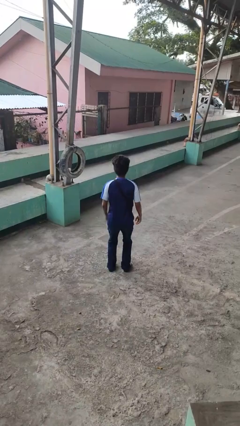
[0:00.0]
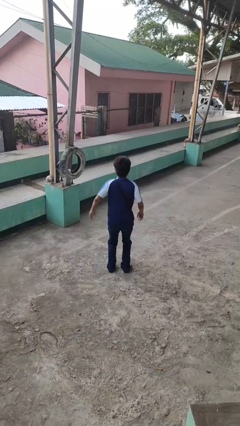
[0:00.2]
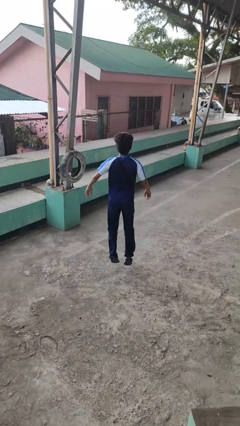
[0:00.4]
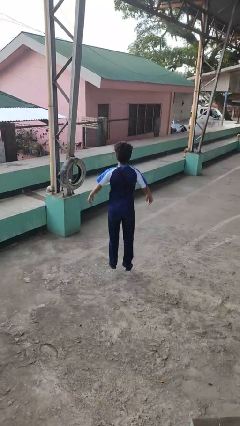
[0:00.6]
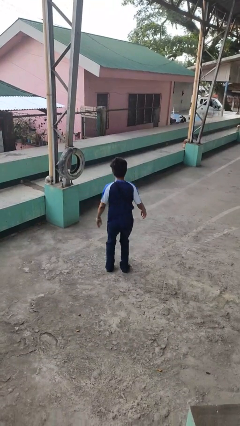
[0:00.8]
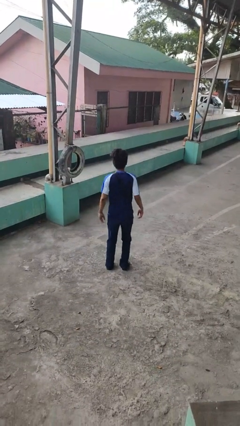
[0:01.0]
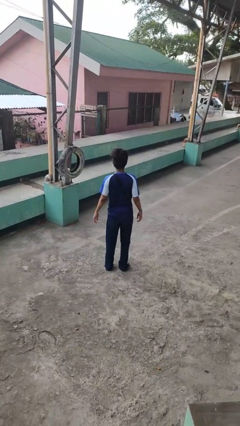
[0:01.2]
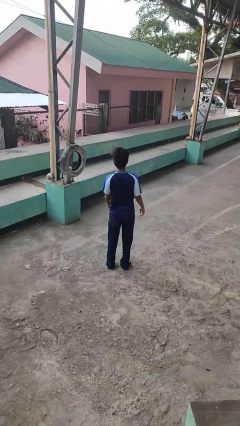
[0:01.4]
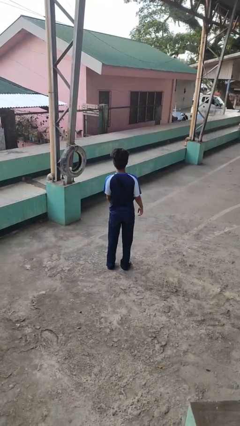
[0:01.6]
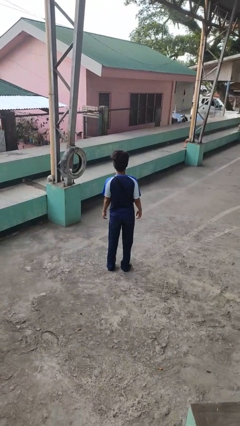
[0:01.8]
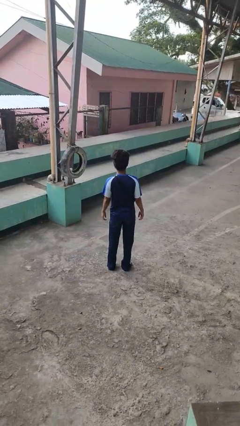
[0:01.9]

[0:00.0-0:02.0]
person jumps

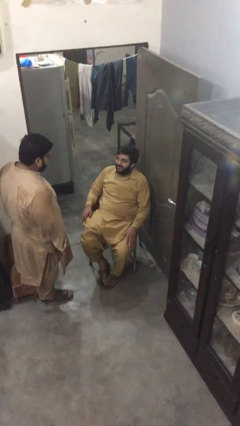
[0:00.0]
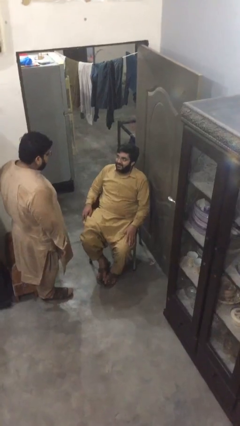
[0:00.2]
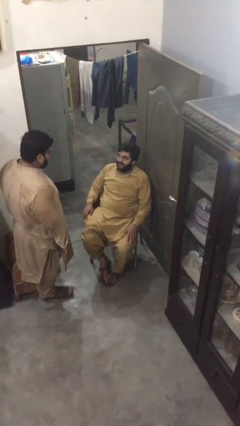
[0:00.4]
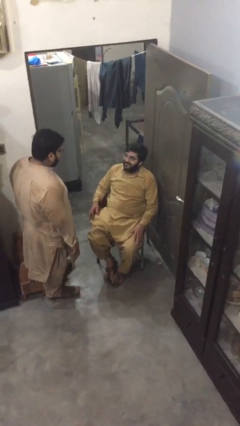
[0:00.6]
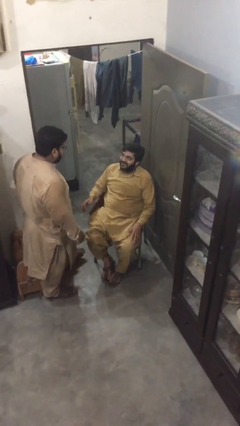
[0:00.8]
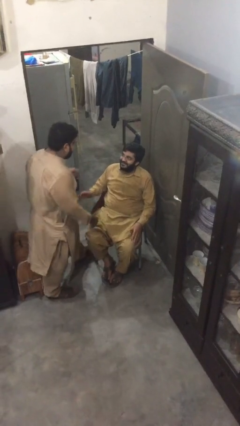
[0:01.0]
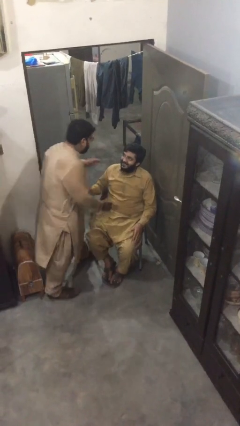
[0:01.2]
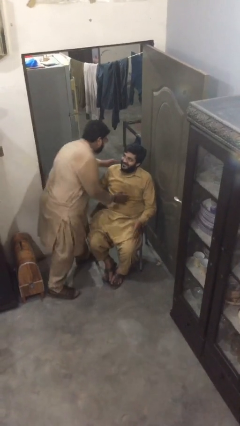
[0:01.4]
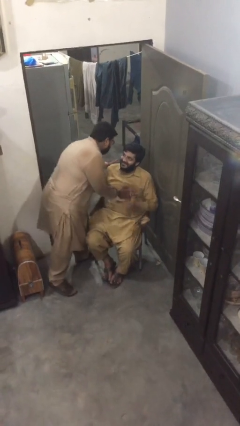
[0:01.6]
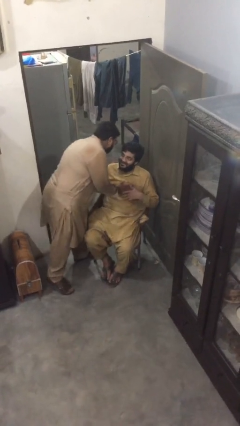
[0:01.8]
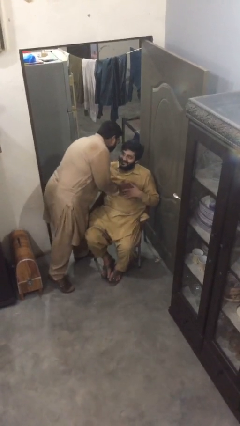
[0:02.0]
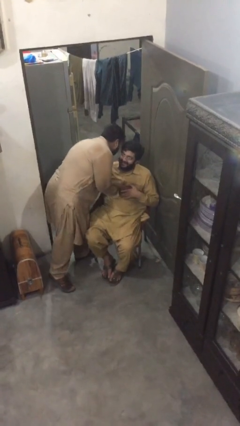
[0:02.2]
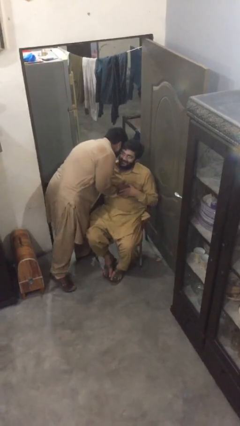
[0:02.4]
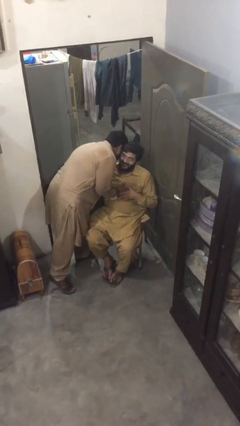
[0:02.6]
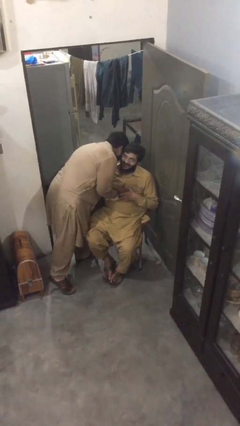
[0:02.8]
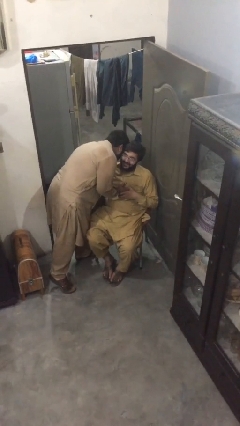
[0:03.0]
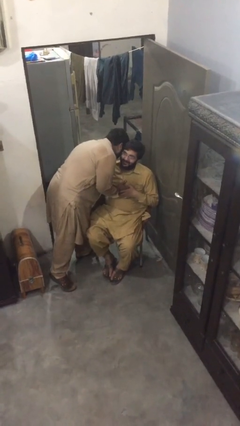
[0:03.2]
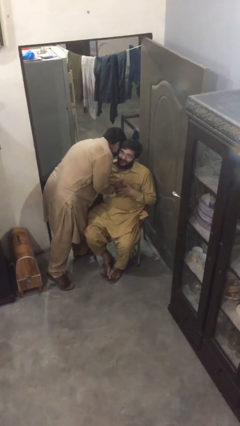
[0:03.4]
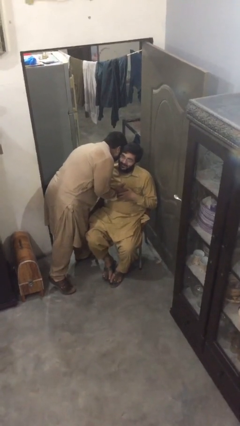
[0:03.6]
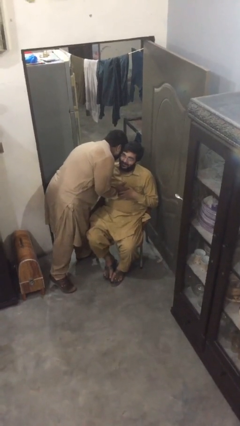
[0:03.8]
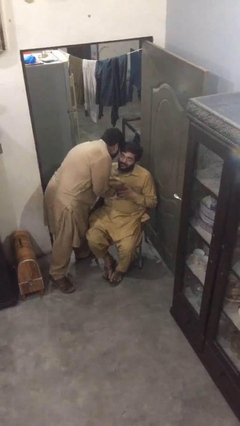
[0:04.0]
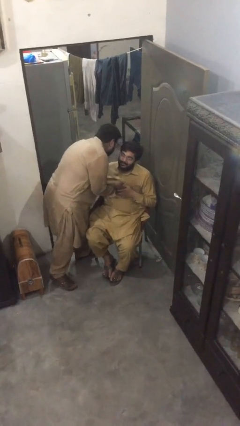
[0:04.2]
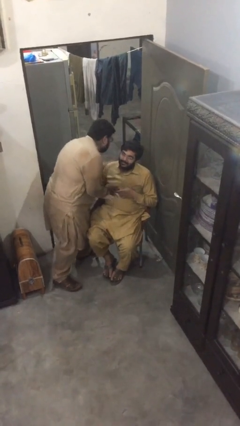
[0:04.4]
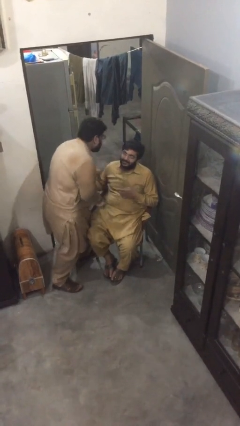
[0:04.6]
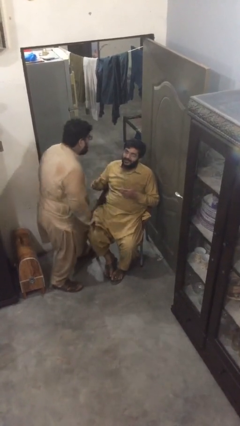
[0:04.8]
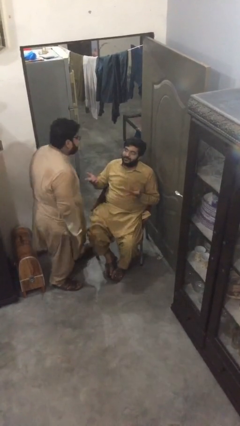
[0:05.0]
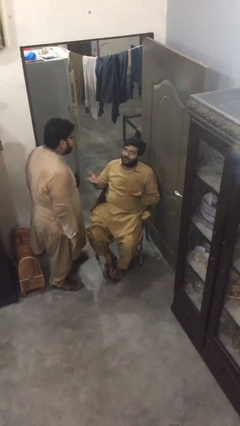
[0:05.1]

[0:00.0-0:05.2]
person embraces person

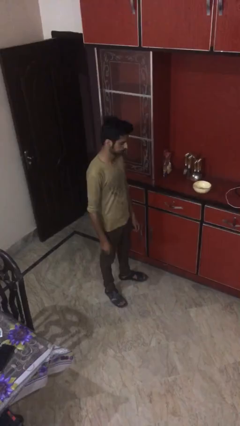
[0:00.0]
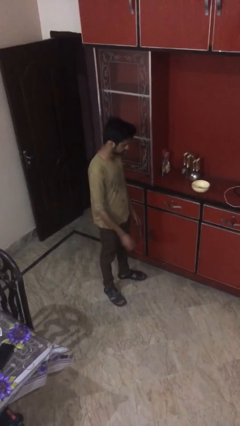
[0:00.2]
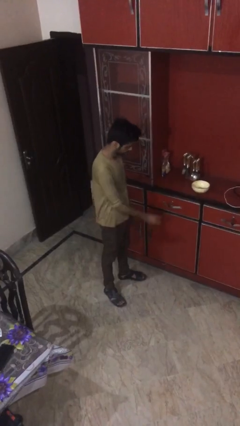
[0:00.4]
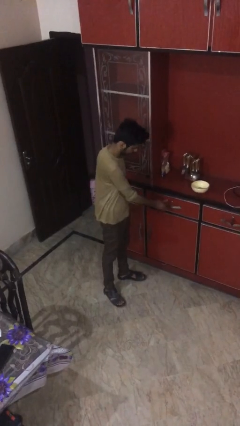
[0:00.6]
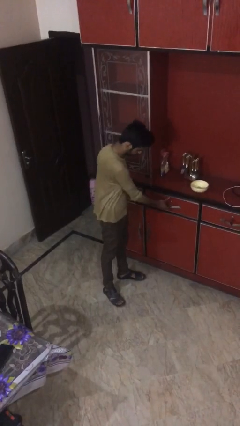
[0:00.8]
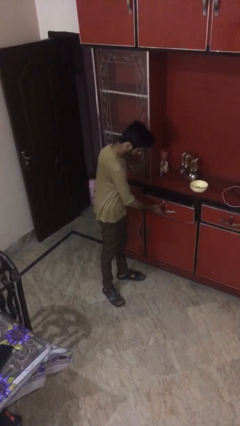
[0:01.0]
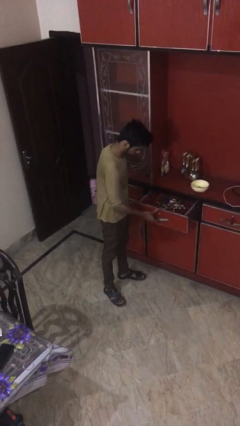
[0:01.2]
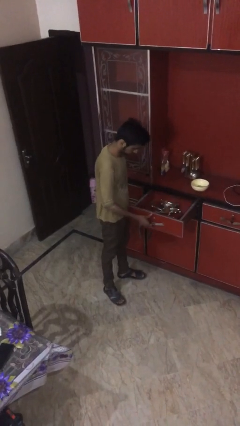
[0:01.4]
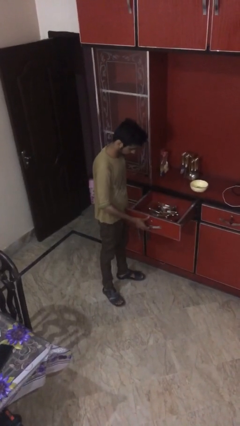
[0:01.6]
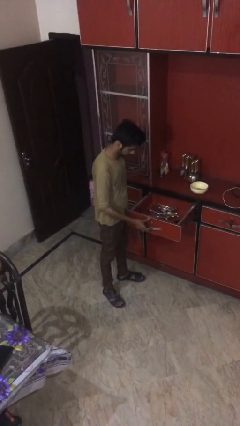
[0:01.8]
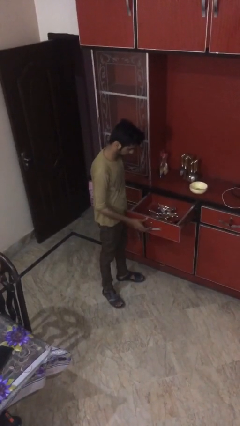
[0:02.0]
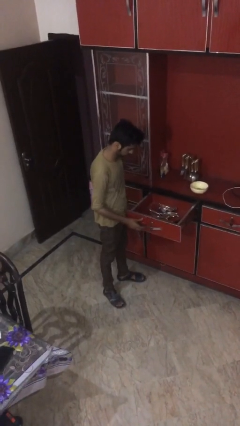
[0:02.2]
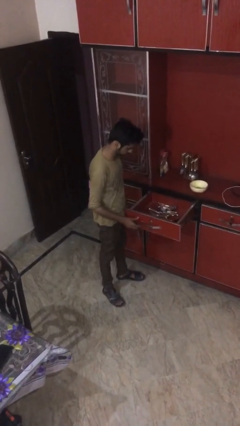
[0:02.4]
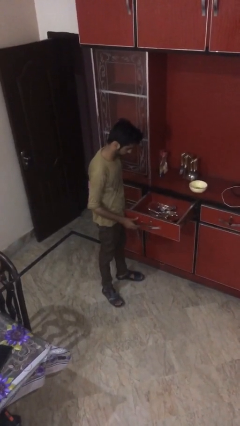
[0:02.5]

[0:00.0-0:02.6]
person opens kitchen drawer

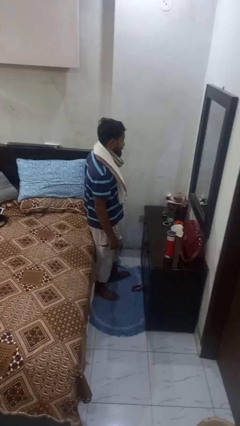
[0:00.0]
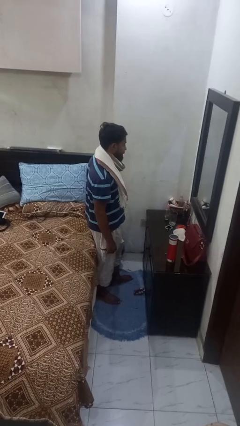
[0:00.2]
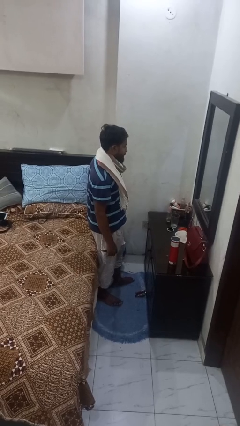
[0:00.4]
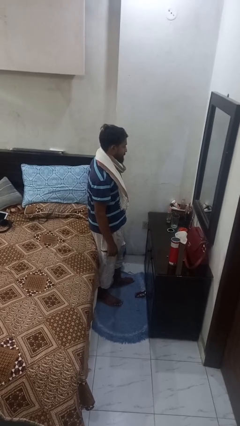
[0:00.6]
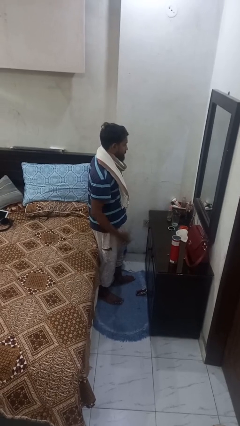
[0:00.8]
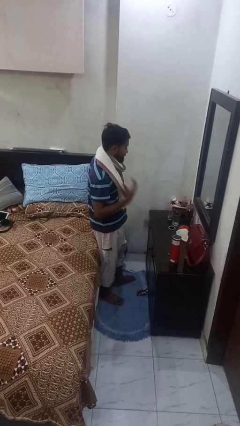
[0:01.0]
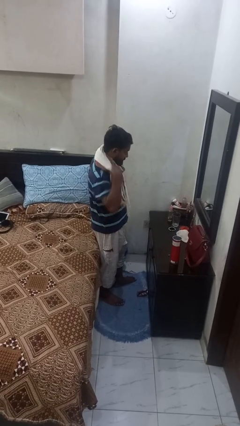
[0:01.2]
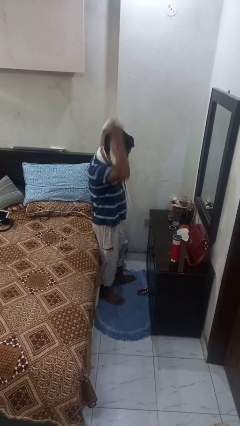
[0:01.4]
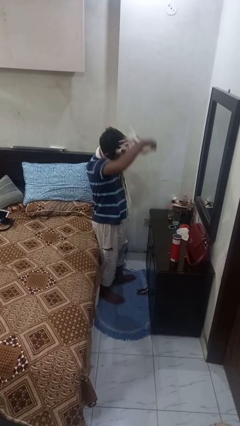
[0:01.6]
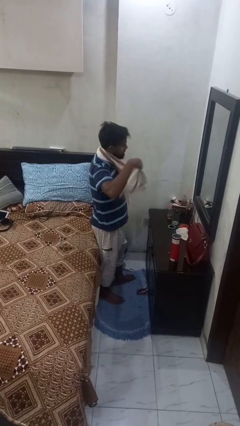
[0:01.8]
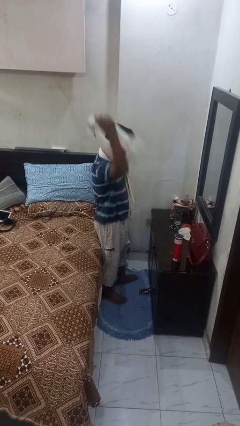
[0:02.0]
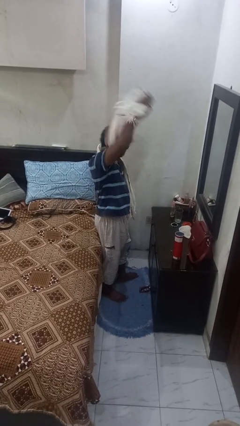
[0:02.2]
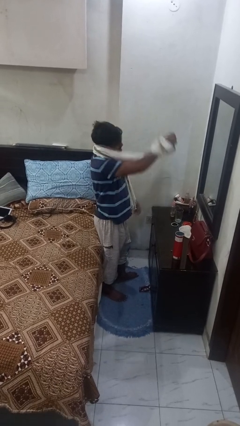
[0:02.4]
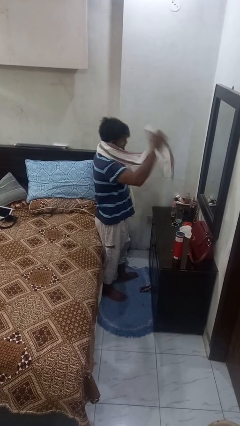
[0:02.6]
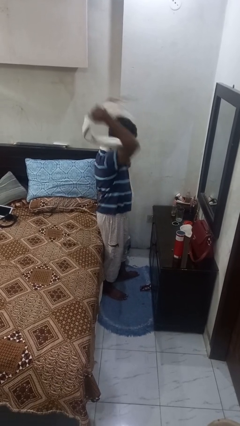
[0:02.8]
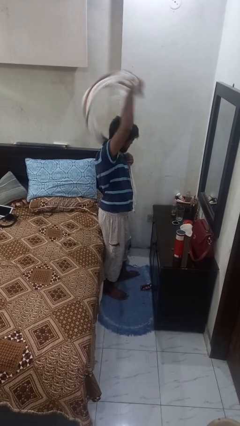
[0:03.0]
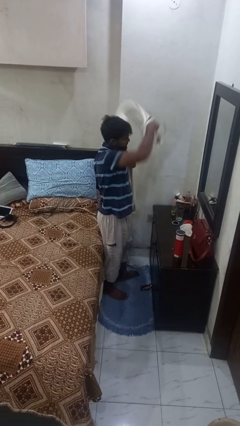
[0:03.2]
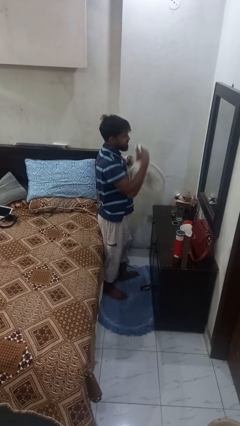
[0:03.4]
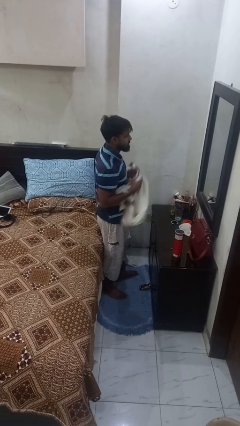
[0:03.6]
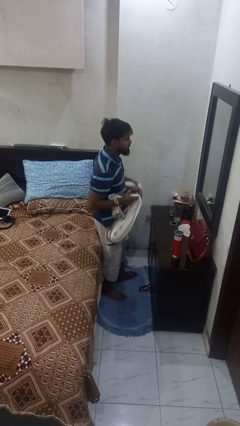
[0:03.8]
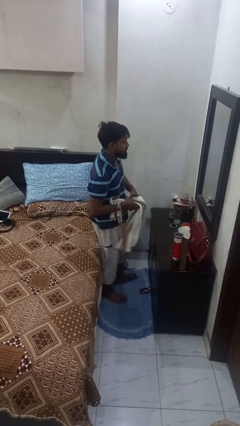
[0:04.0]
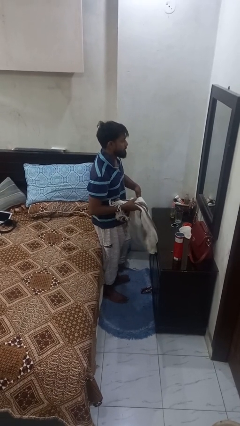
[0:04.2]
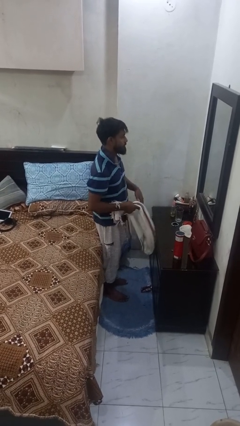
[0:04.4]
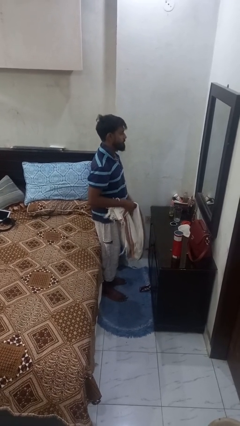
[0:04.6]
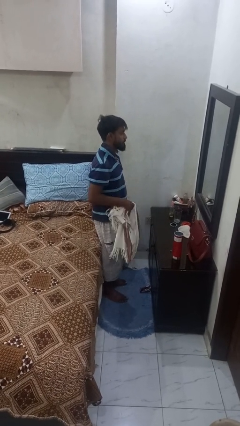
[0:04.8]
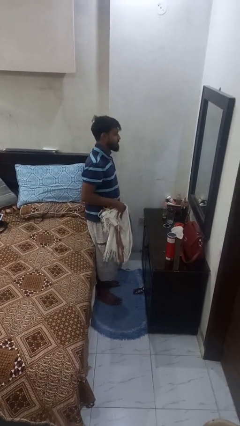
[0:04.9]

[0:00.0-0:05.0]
person takes off scarf

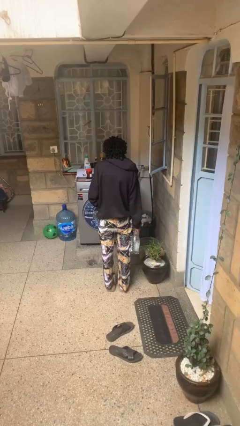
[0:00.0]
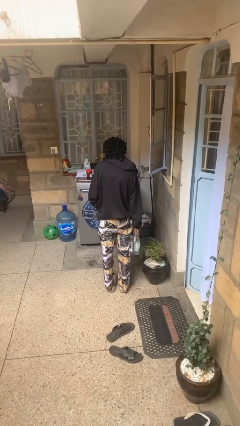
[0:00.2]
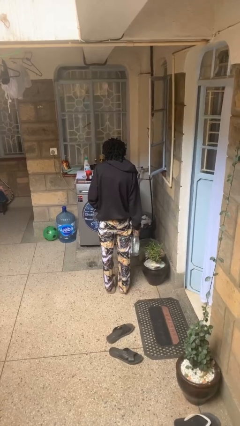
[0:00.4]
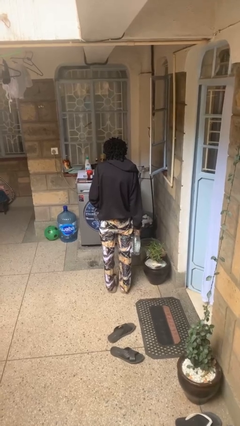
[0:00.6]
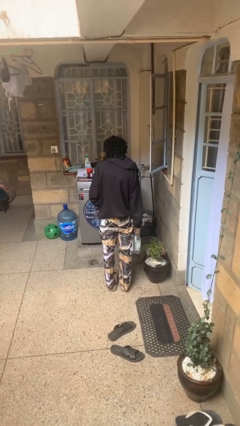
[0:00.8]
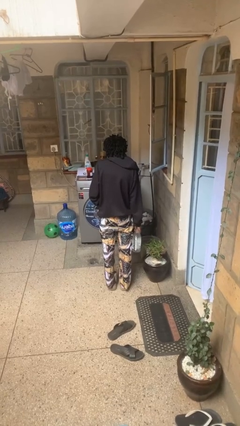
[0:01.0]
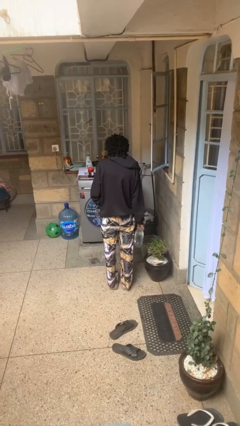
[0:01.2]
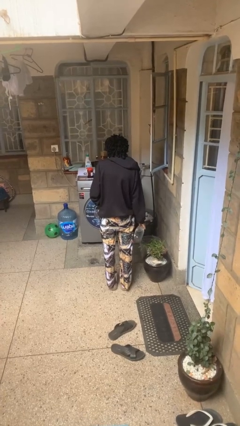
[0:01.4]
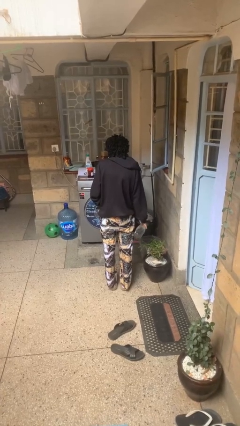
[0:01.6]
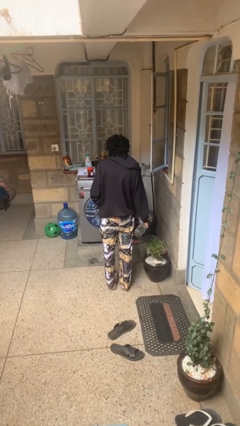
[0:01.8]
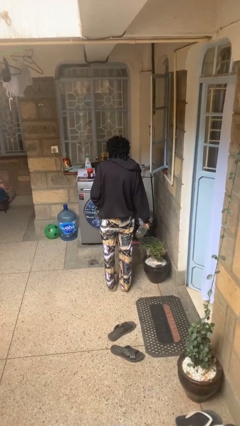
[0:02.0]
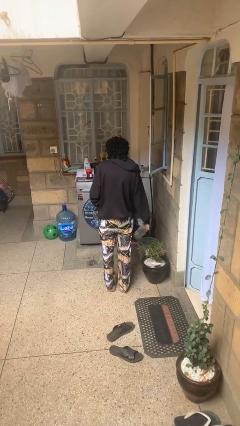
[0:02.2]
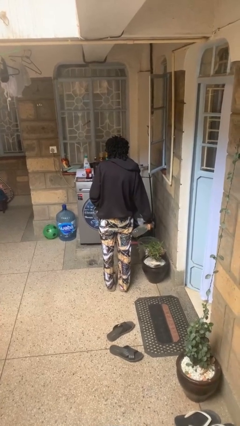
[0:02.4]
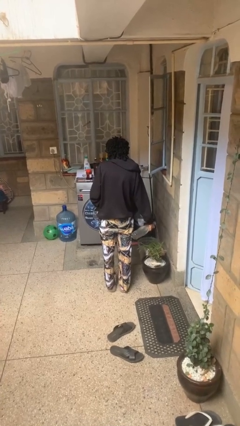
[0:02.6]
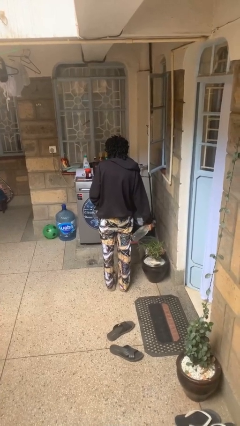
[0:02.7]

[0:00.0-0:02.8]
person waters houseplant
